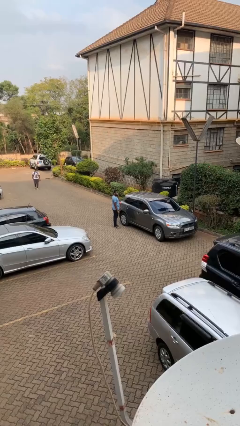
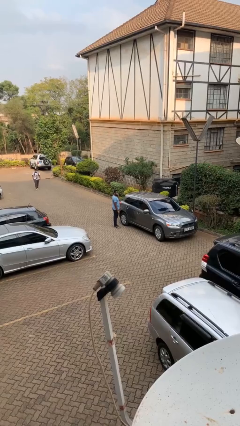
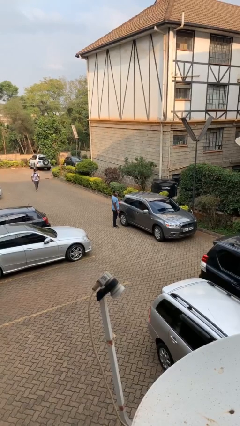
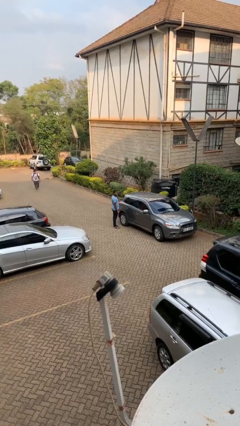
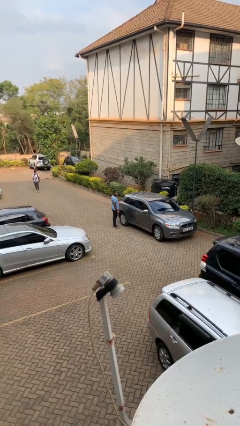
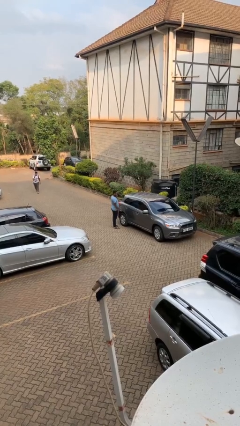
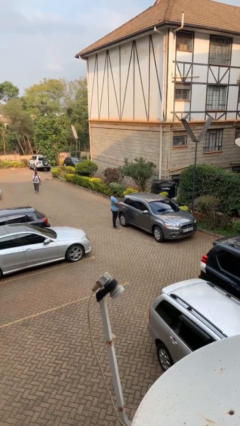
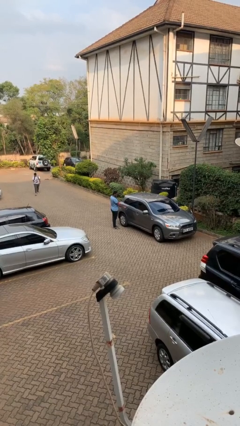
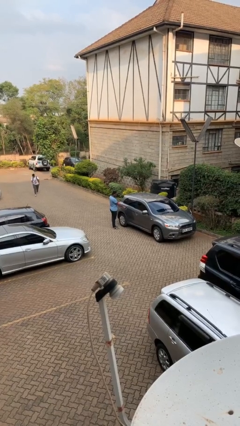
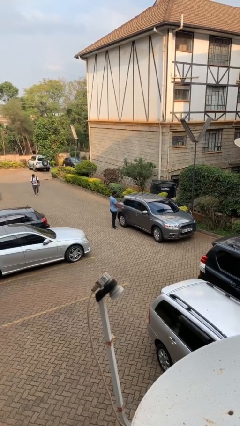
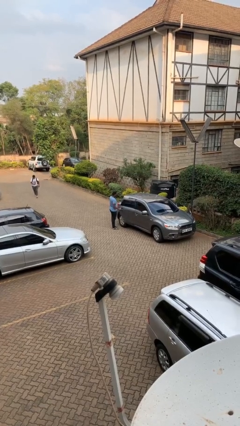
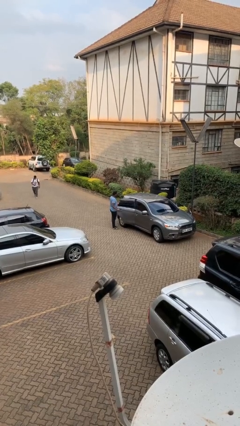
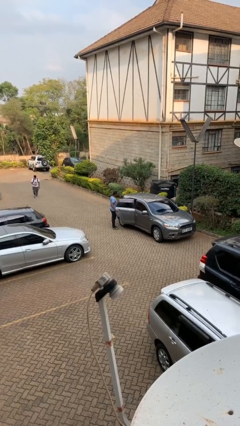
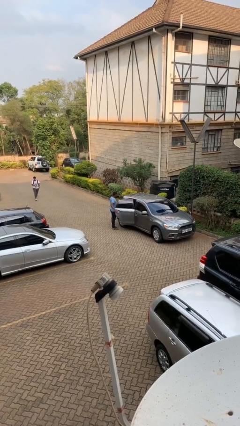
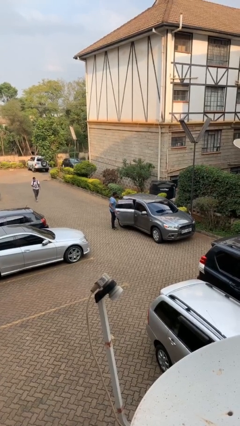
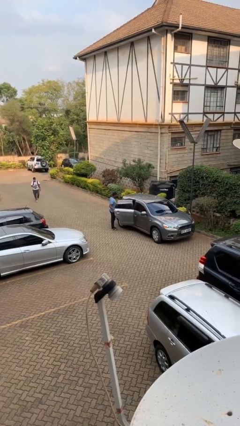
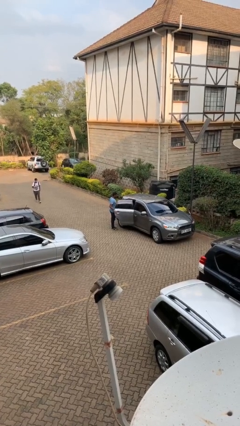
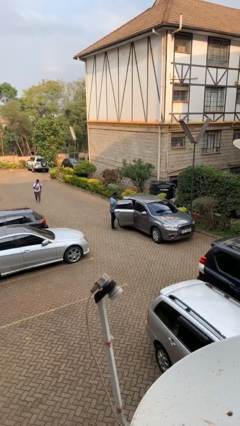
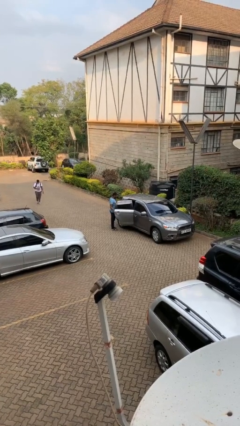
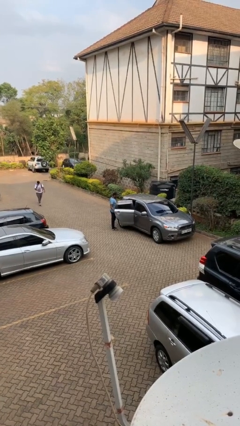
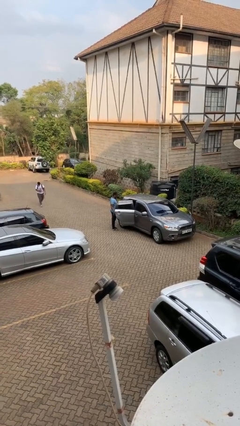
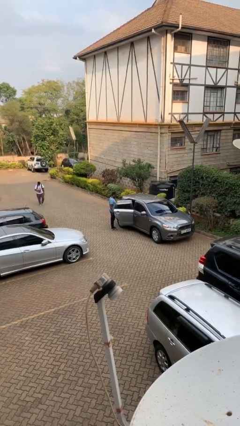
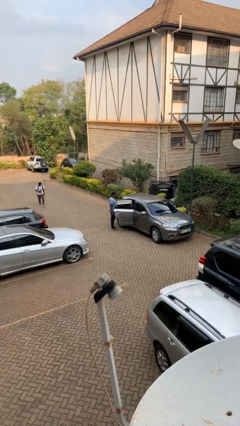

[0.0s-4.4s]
person opens car door

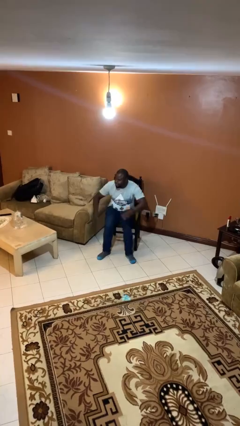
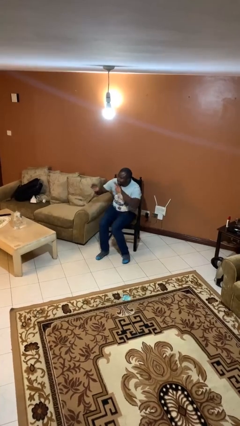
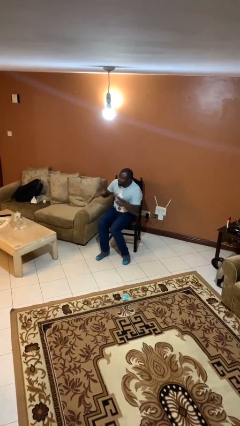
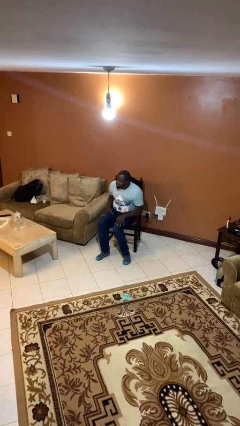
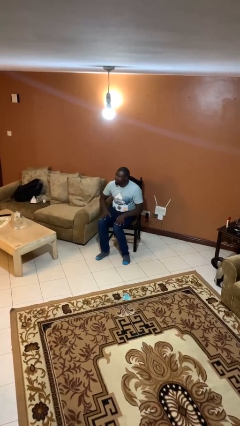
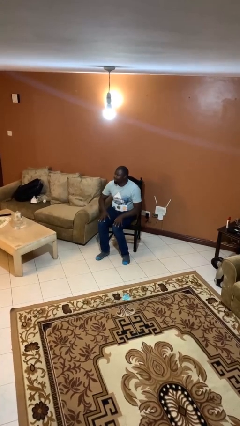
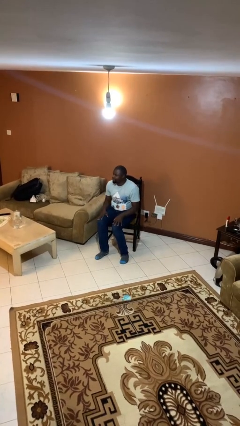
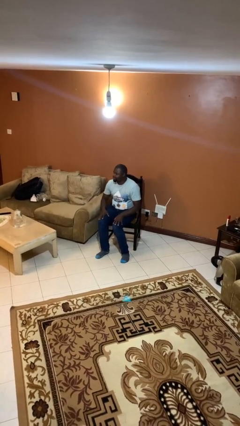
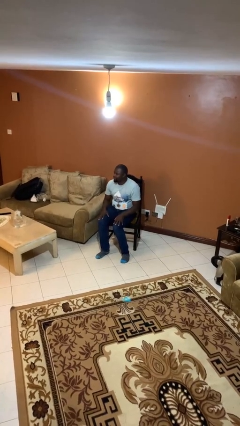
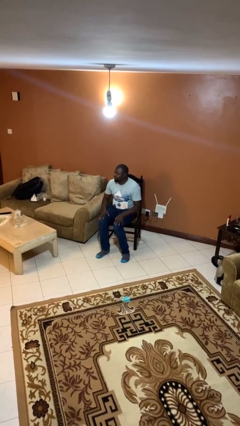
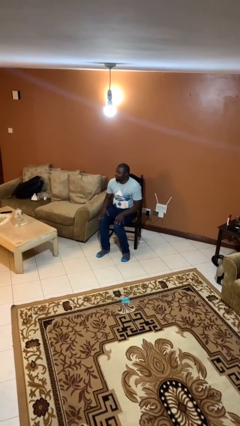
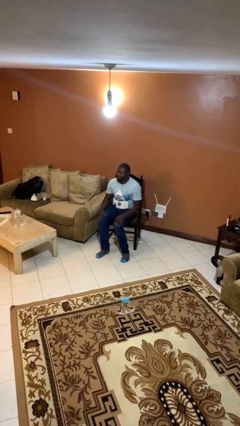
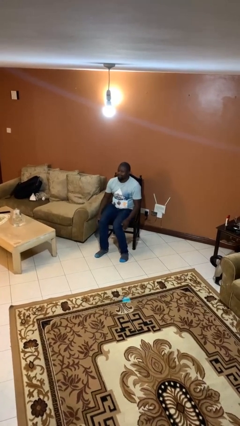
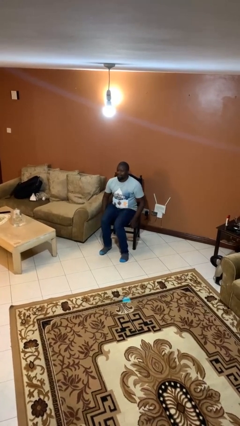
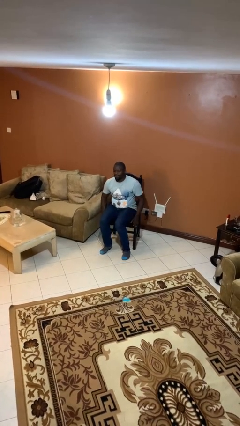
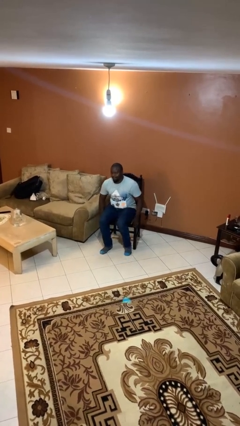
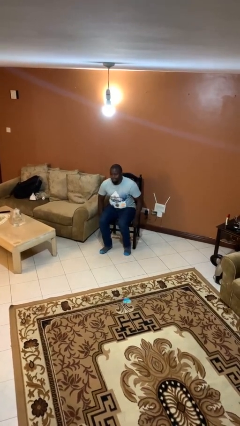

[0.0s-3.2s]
person slaps hands on thighs

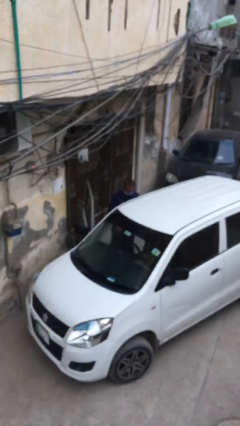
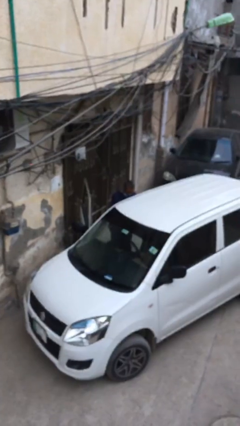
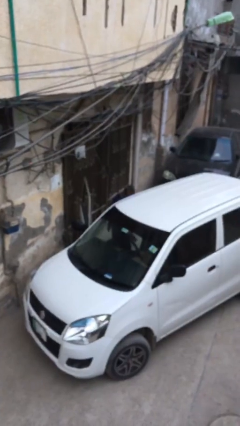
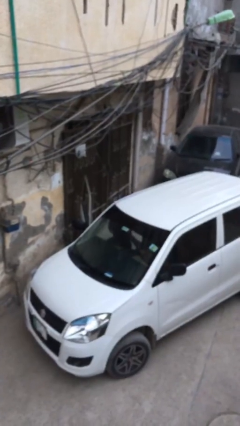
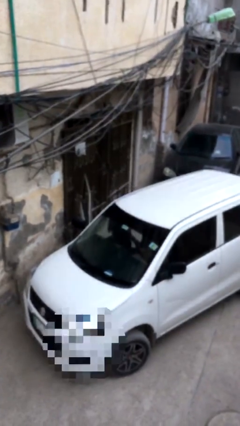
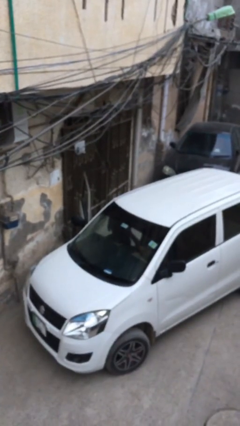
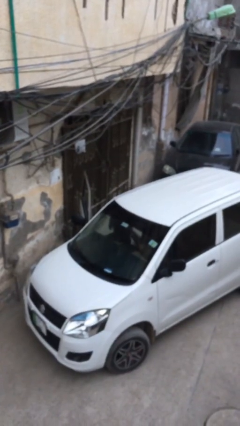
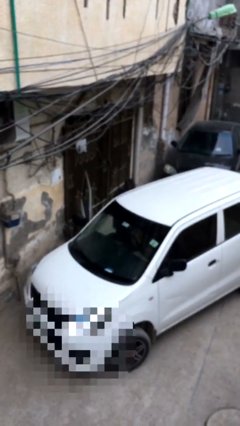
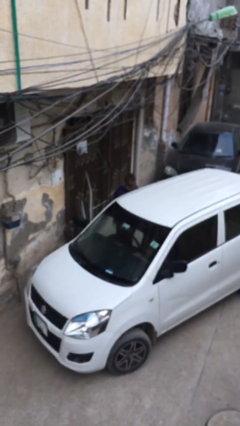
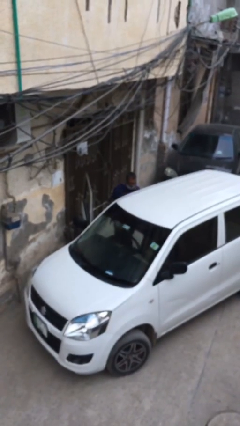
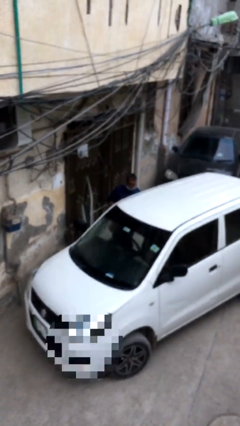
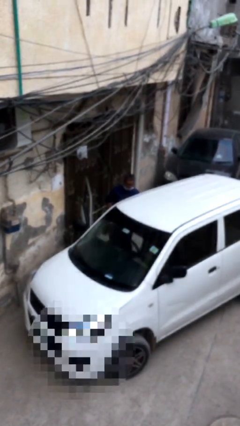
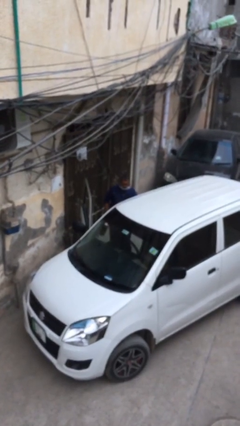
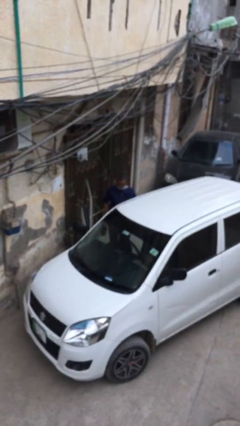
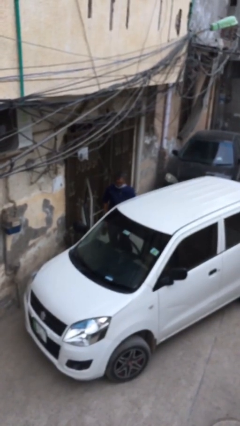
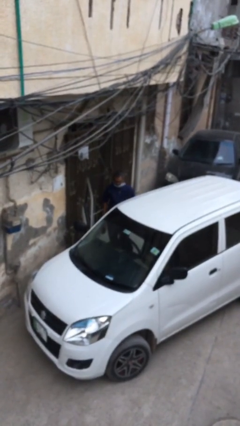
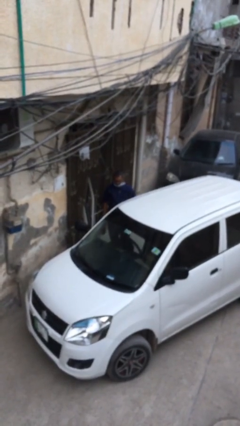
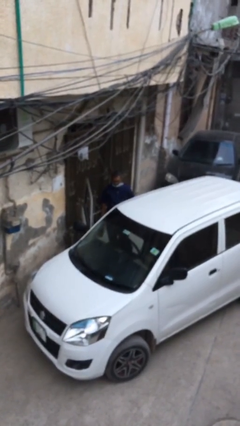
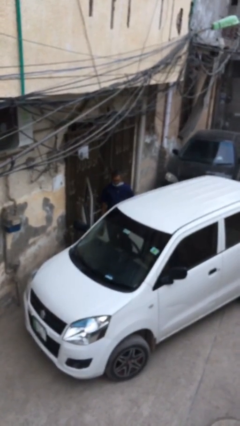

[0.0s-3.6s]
person unloads car

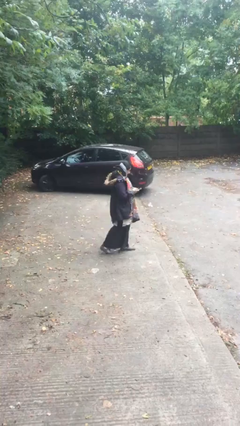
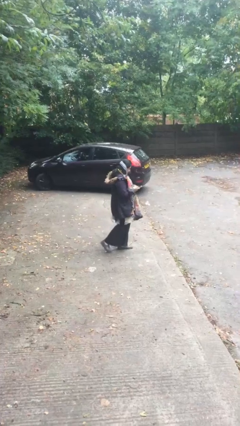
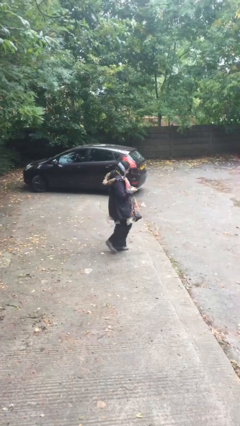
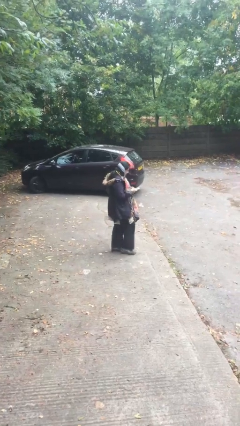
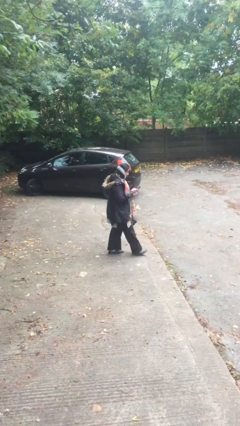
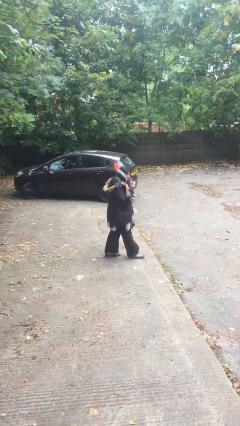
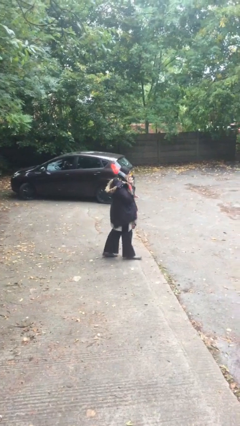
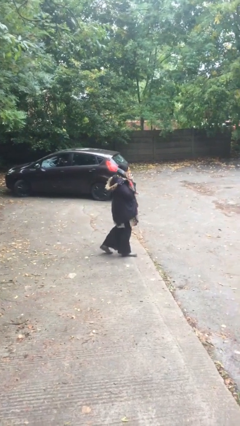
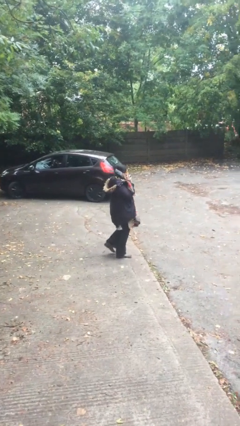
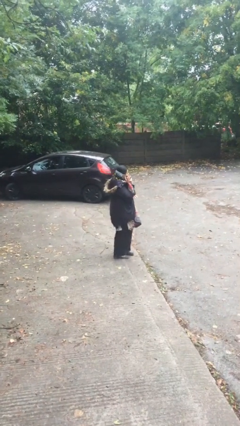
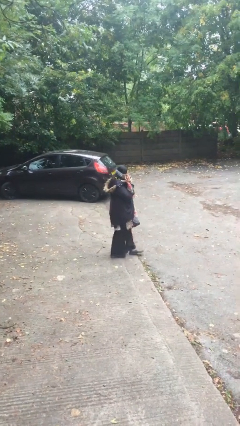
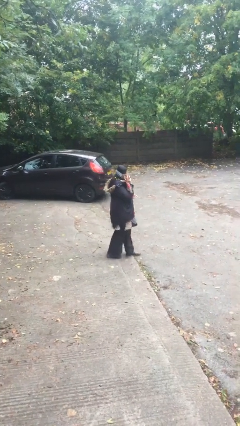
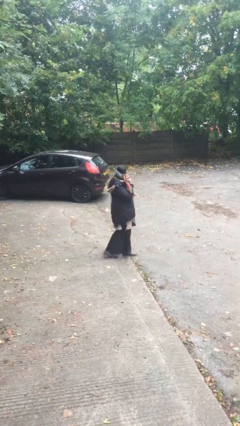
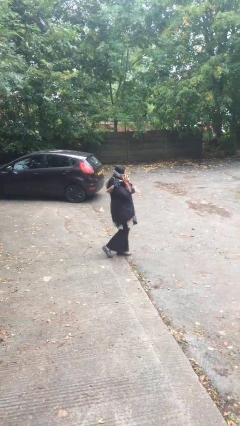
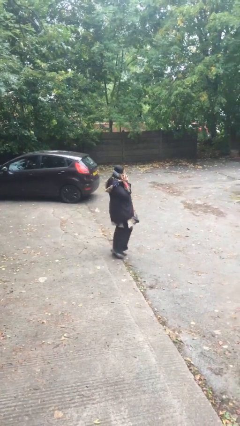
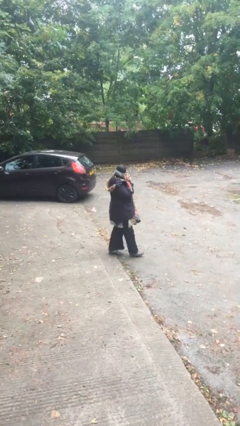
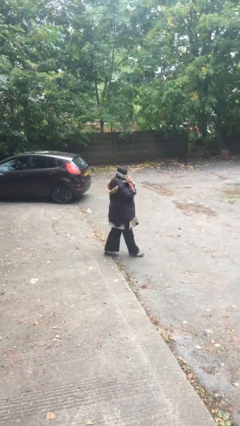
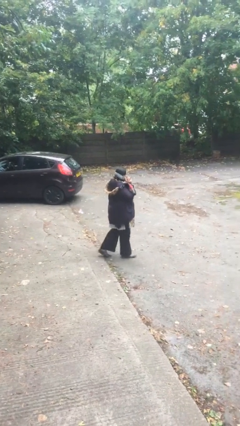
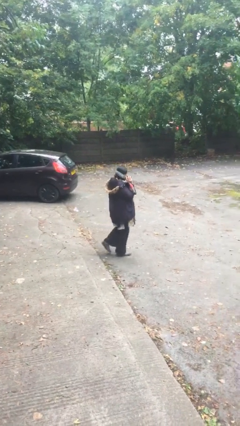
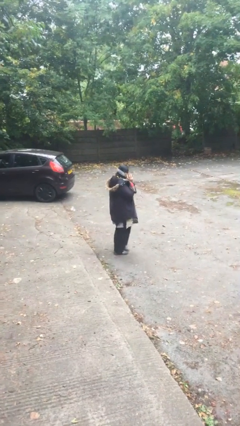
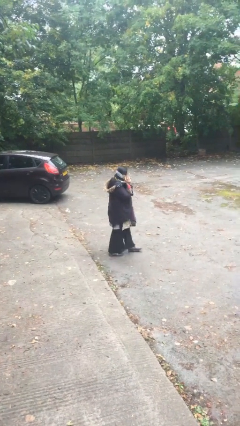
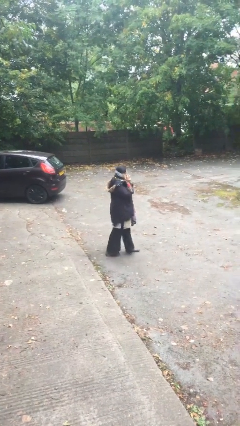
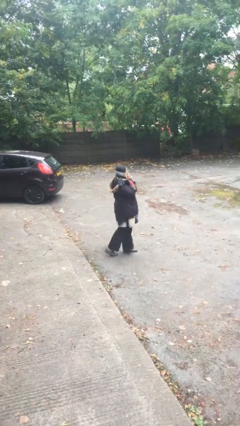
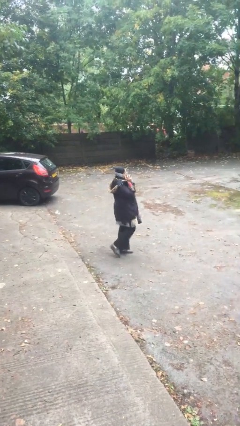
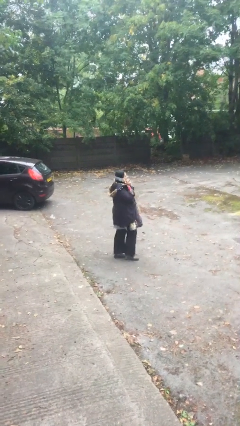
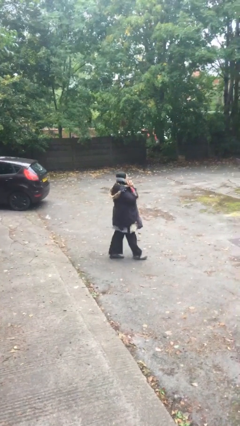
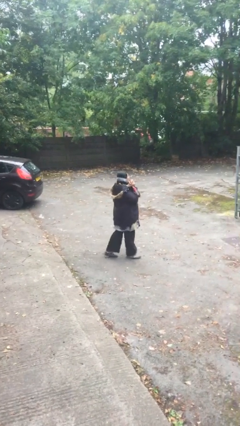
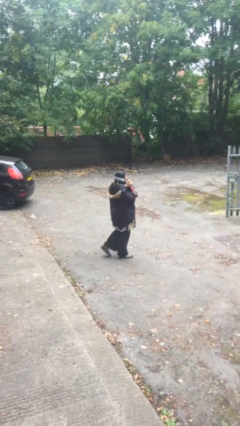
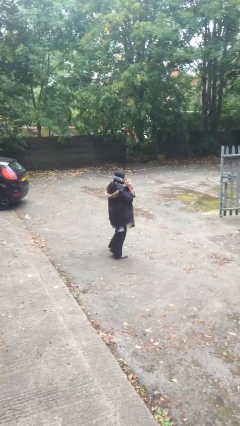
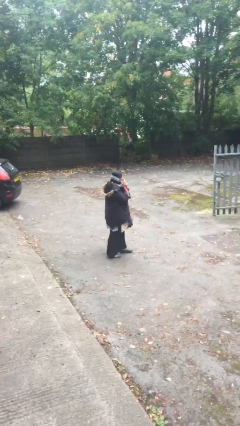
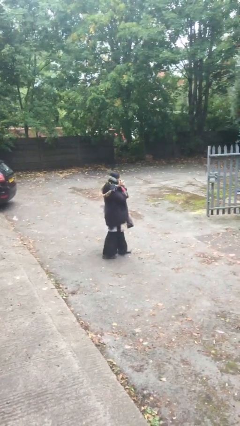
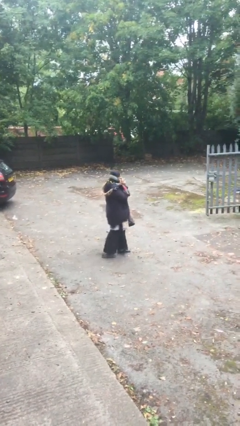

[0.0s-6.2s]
person talks on phone

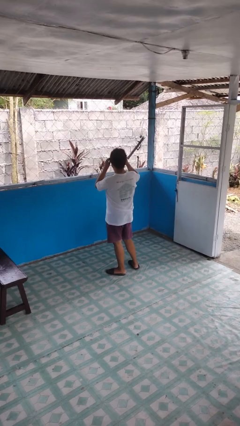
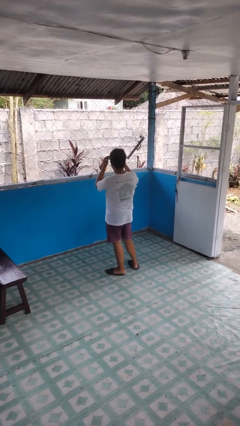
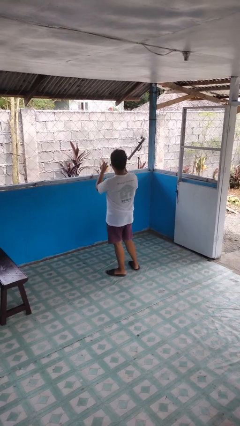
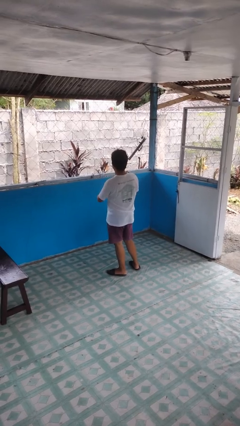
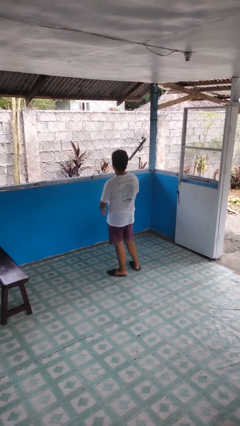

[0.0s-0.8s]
person takes off sunglasses
